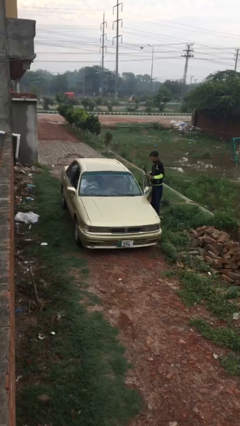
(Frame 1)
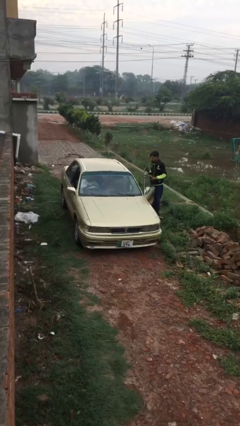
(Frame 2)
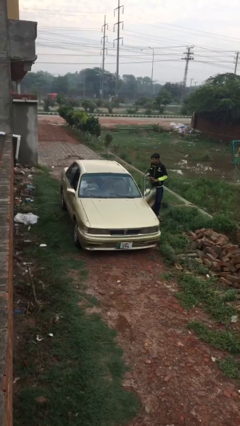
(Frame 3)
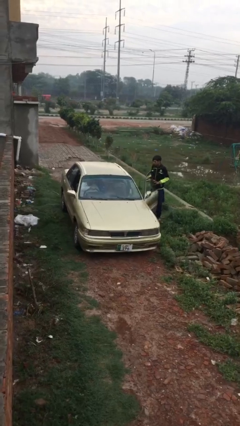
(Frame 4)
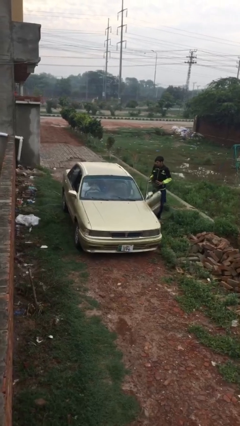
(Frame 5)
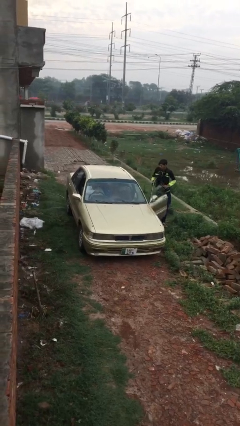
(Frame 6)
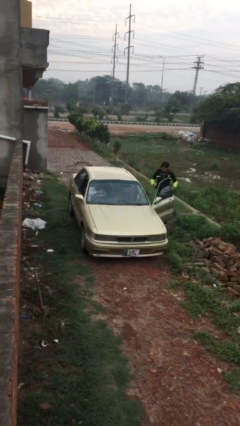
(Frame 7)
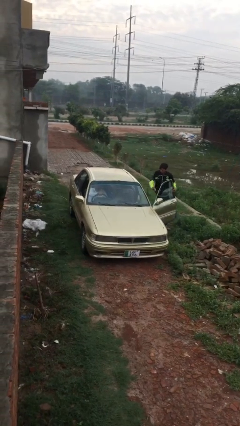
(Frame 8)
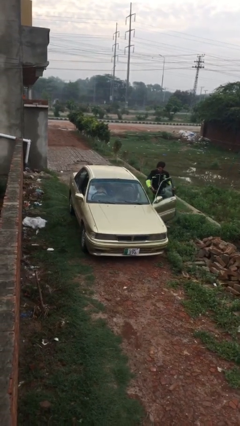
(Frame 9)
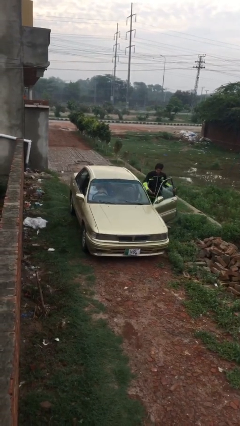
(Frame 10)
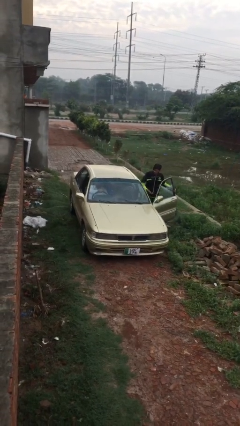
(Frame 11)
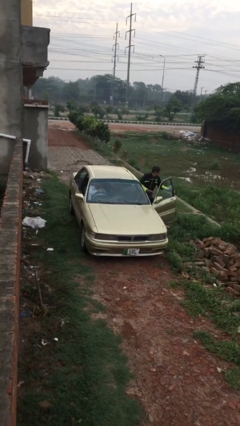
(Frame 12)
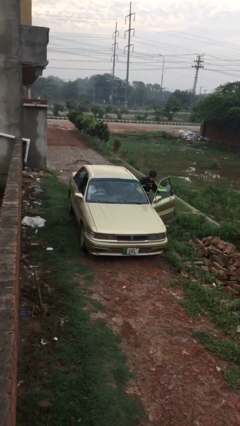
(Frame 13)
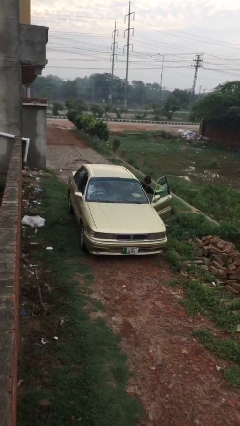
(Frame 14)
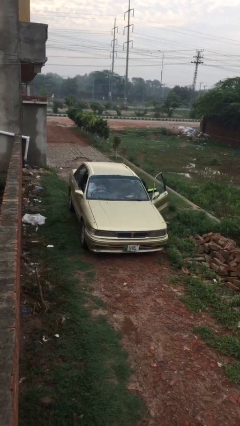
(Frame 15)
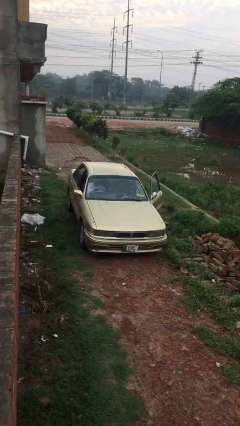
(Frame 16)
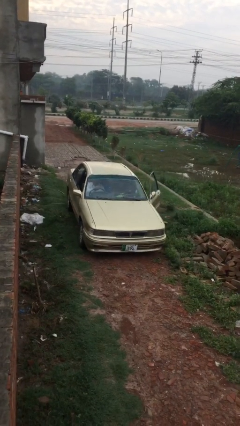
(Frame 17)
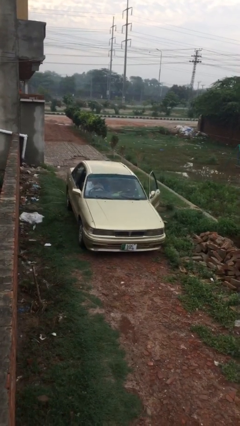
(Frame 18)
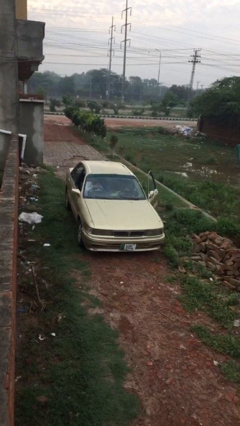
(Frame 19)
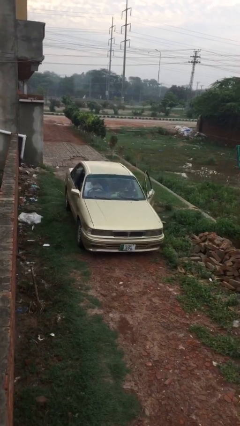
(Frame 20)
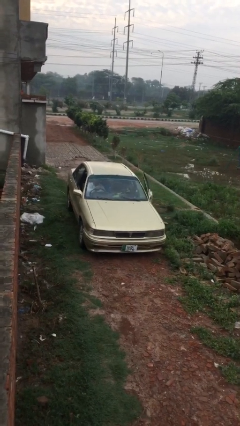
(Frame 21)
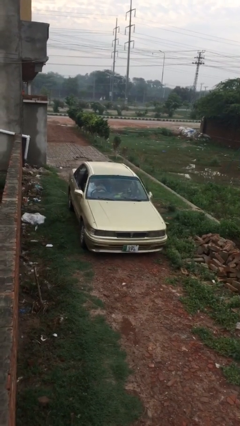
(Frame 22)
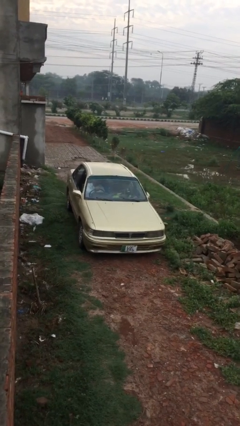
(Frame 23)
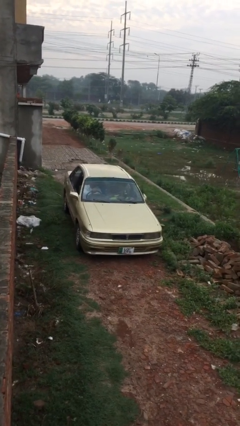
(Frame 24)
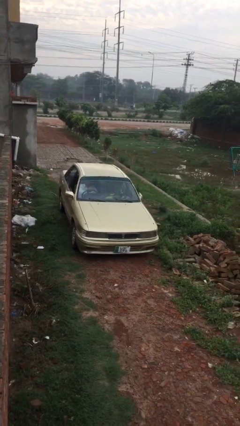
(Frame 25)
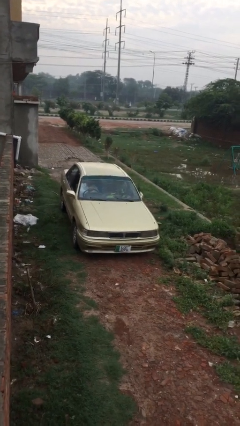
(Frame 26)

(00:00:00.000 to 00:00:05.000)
car picks up person

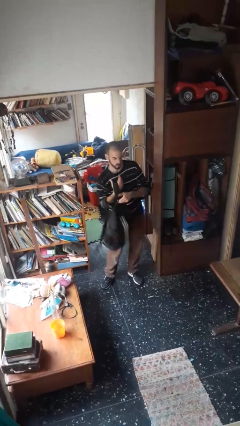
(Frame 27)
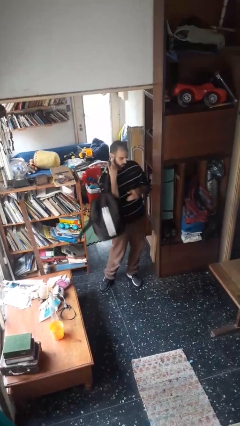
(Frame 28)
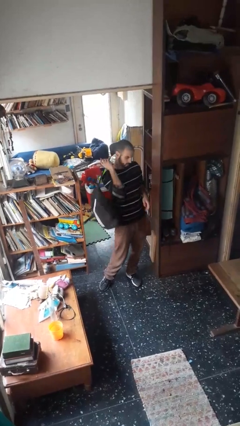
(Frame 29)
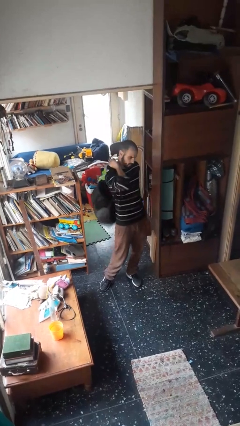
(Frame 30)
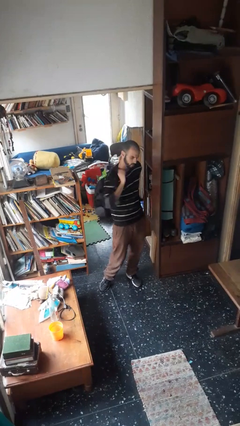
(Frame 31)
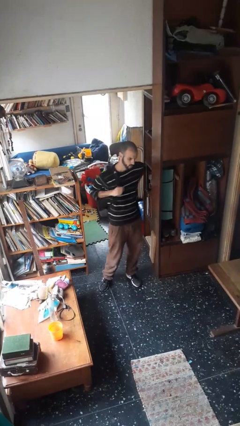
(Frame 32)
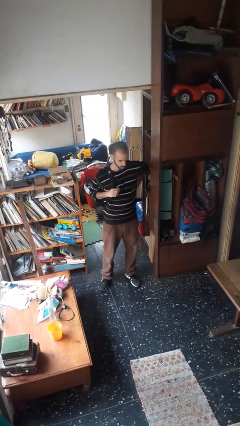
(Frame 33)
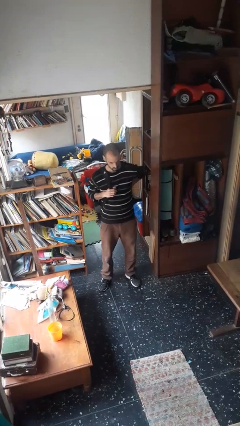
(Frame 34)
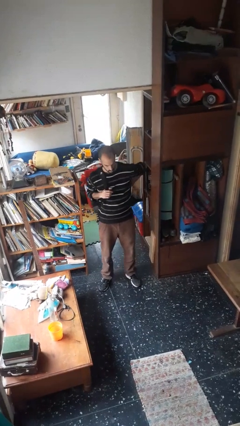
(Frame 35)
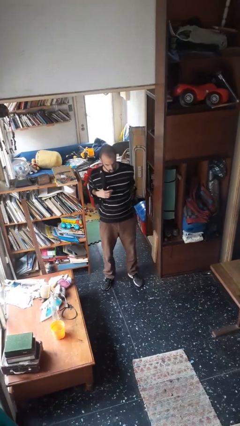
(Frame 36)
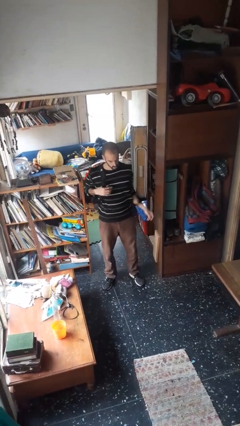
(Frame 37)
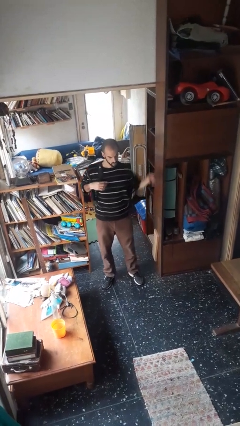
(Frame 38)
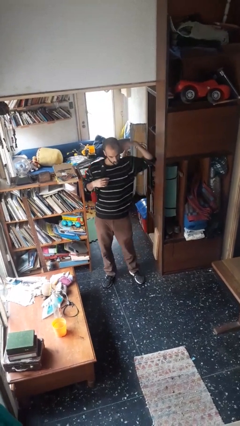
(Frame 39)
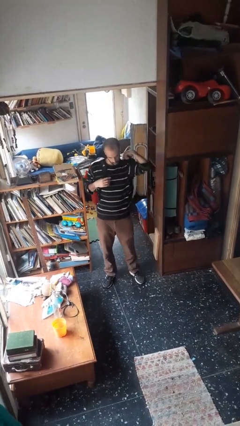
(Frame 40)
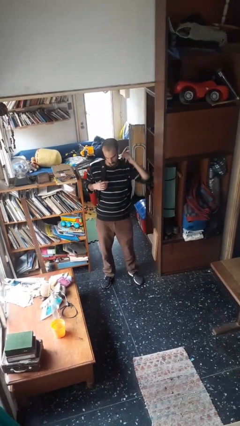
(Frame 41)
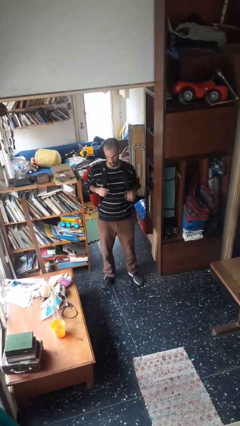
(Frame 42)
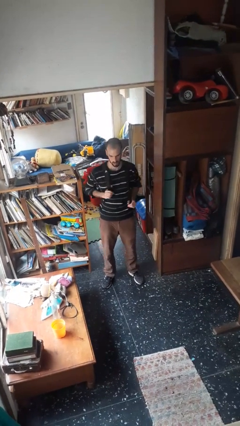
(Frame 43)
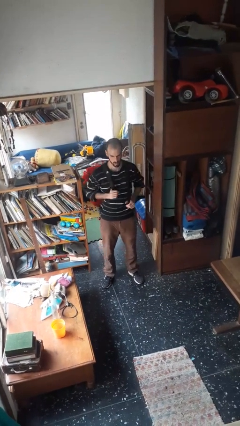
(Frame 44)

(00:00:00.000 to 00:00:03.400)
person puts on backpack

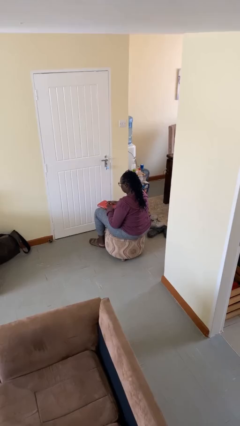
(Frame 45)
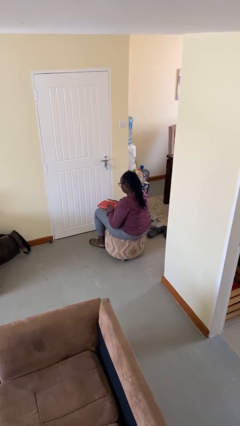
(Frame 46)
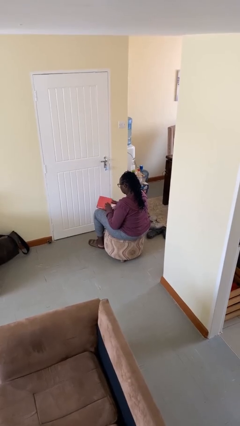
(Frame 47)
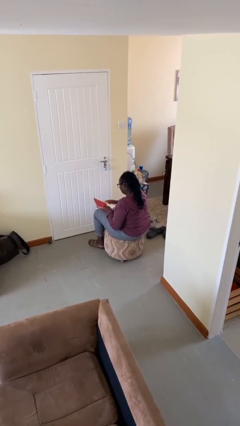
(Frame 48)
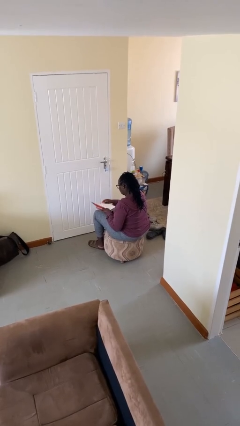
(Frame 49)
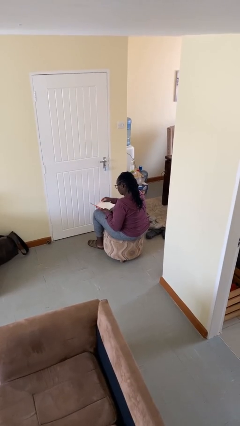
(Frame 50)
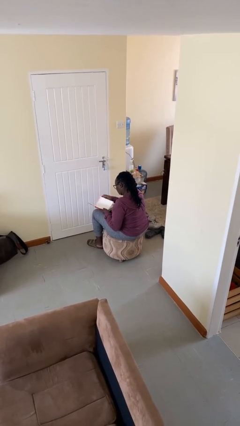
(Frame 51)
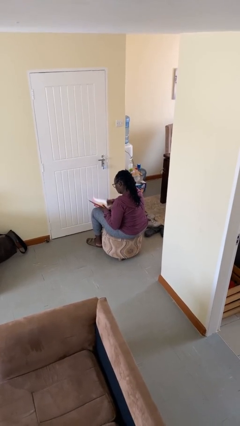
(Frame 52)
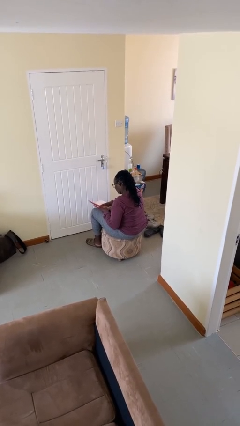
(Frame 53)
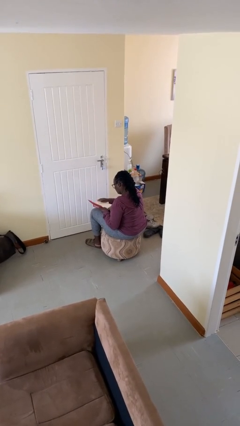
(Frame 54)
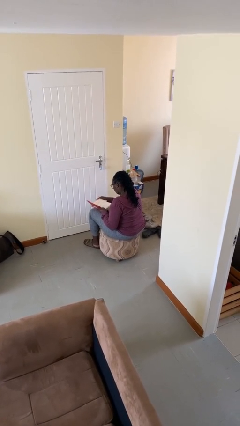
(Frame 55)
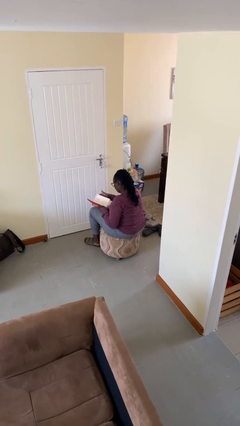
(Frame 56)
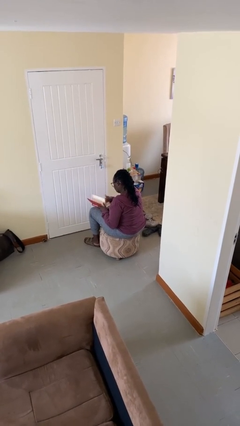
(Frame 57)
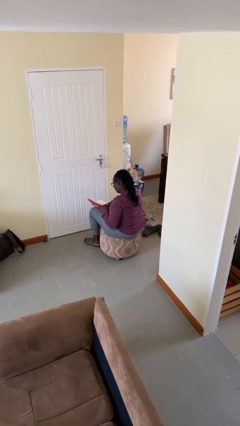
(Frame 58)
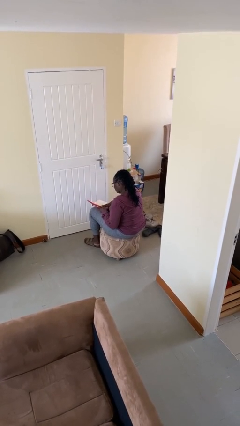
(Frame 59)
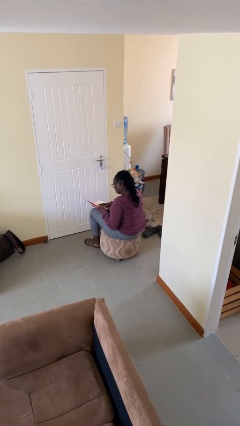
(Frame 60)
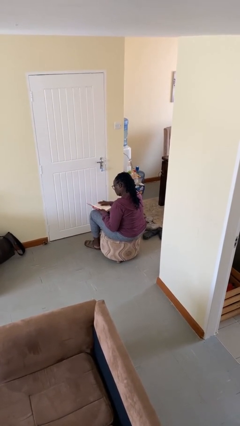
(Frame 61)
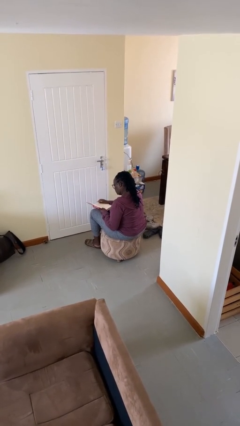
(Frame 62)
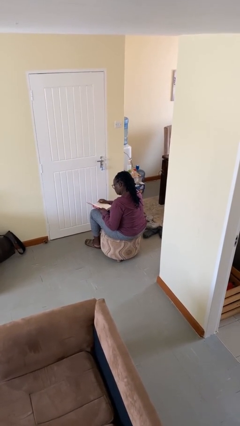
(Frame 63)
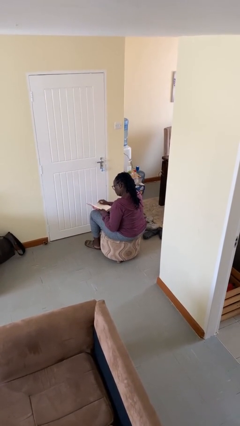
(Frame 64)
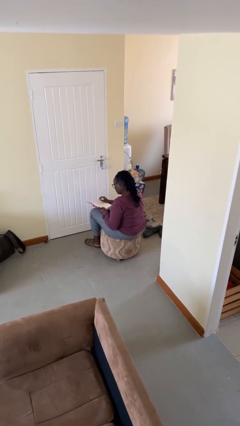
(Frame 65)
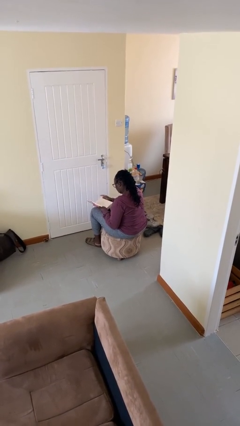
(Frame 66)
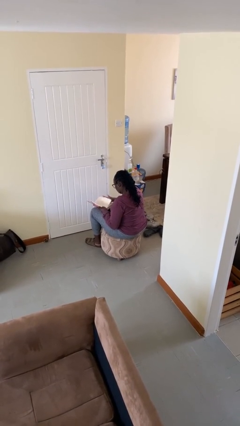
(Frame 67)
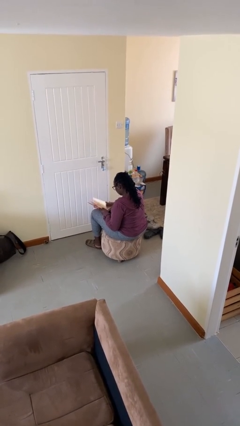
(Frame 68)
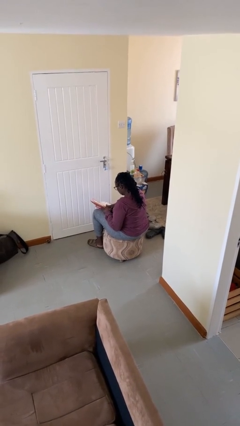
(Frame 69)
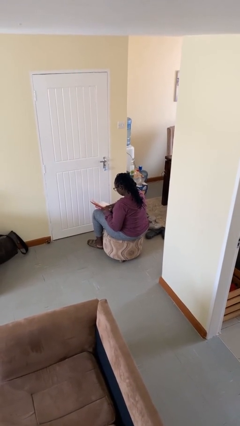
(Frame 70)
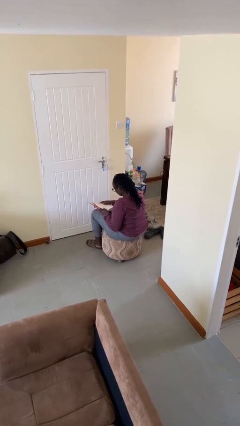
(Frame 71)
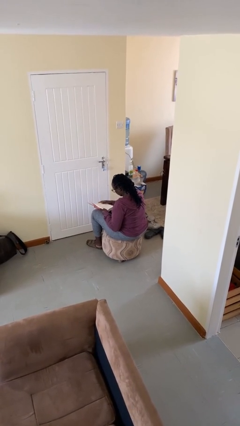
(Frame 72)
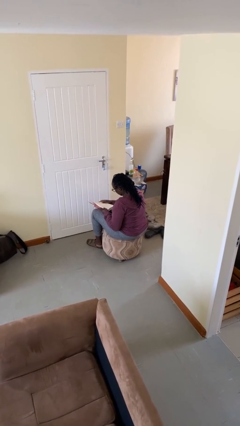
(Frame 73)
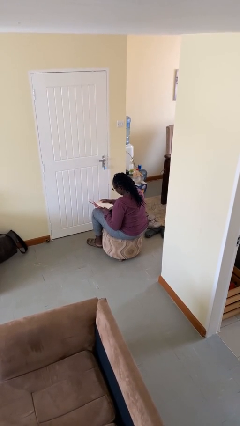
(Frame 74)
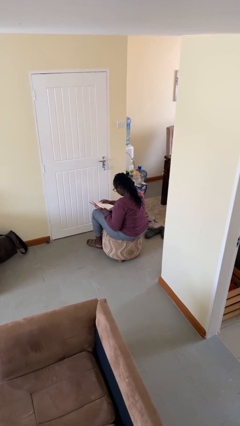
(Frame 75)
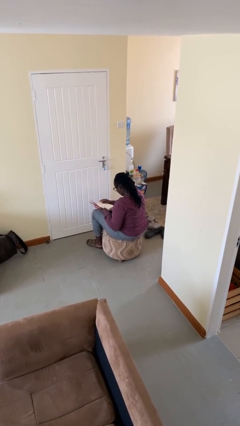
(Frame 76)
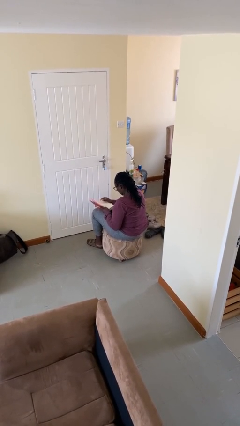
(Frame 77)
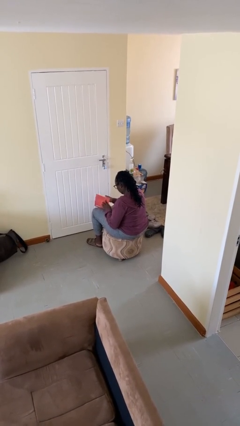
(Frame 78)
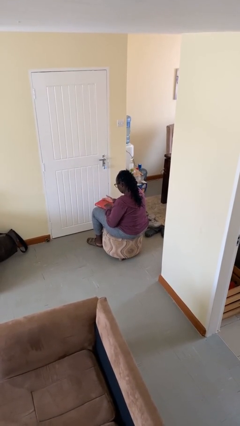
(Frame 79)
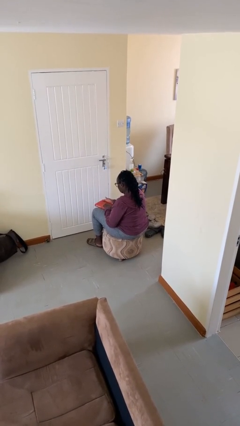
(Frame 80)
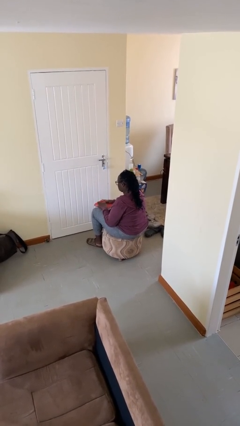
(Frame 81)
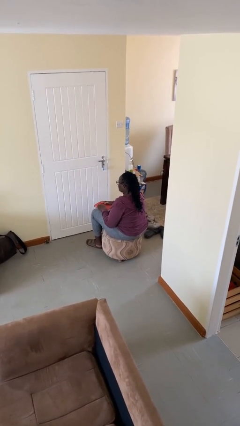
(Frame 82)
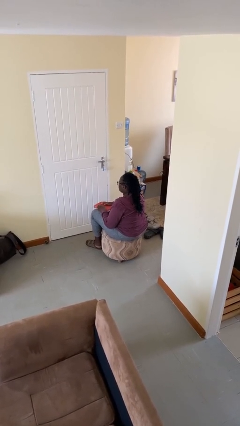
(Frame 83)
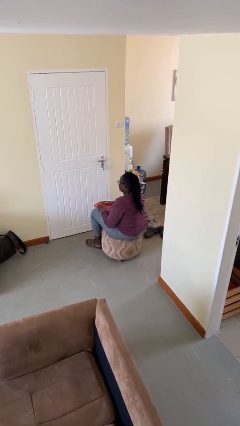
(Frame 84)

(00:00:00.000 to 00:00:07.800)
person reads book

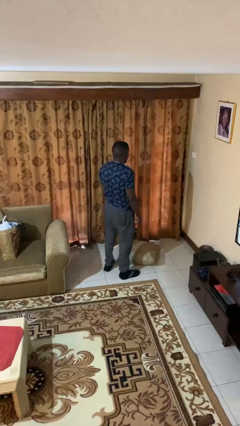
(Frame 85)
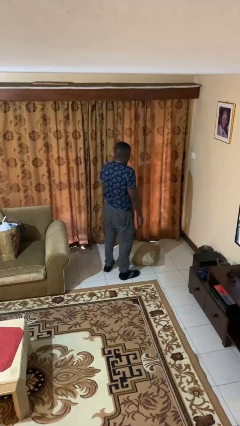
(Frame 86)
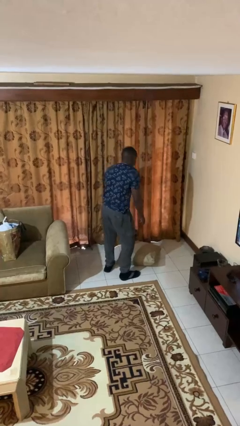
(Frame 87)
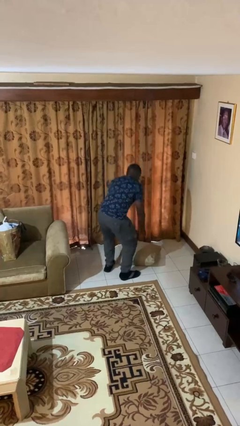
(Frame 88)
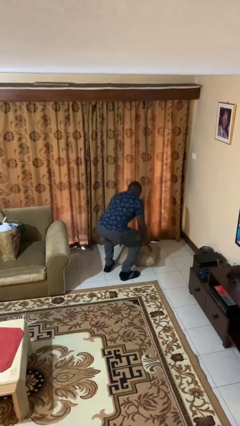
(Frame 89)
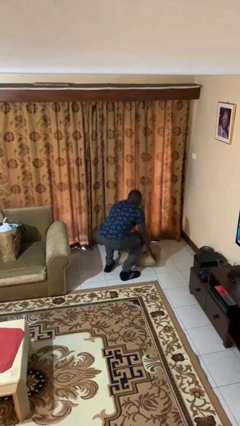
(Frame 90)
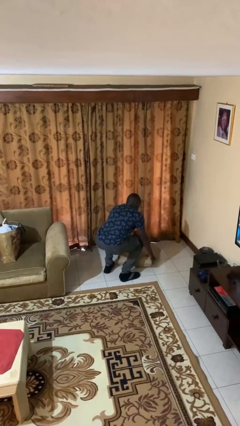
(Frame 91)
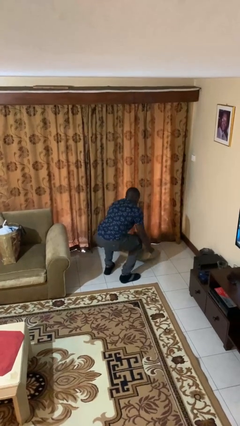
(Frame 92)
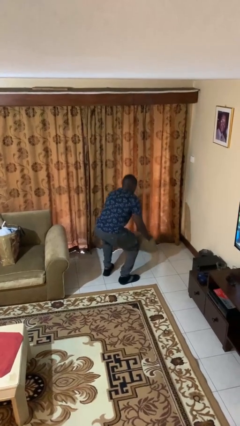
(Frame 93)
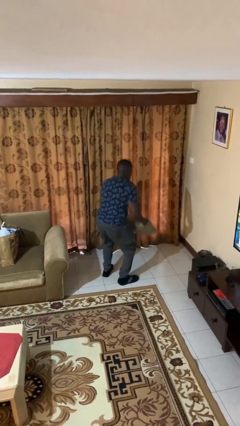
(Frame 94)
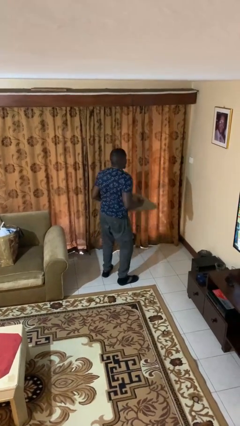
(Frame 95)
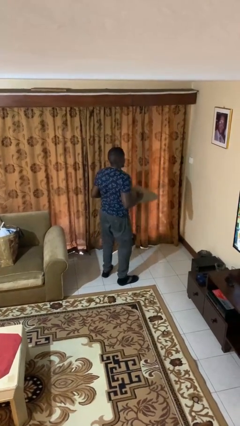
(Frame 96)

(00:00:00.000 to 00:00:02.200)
person picks up object from floor
